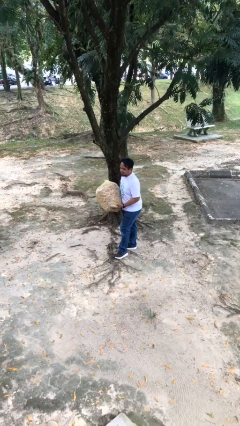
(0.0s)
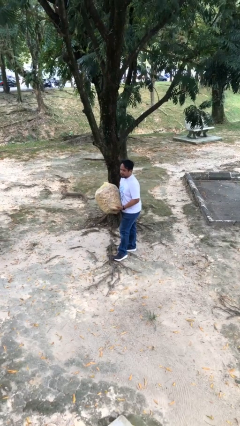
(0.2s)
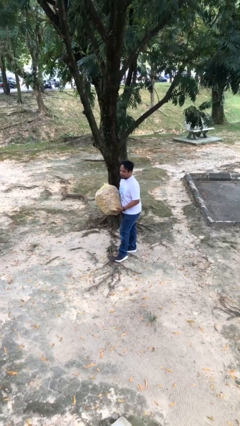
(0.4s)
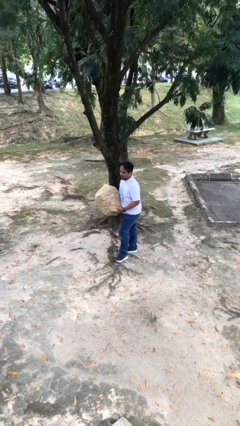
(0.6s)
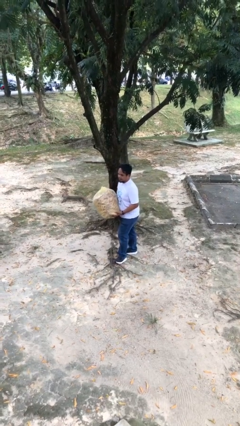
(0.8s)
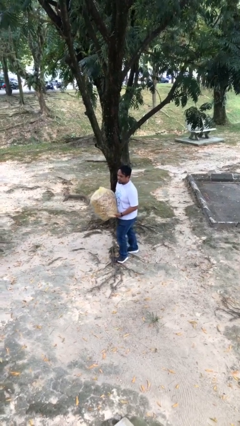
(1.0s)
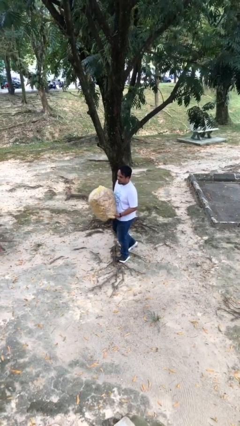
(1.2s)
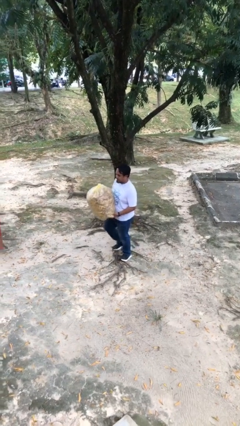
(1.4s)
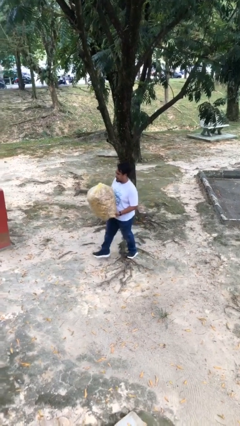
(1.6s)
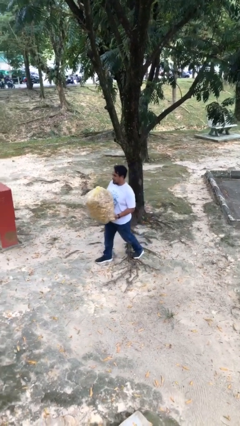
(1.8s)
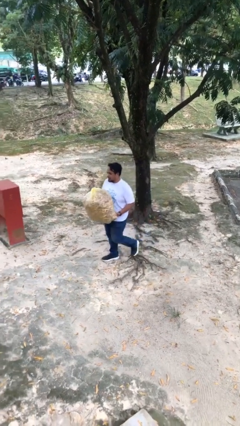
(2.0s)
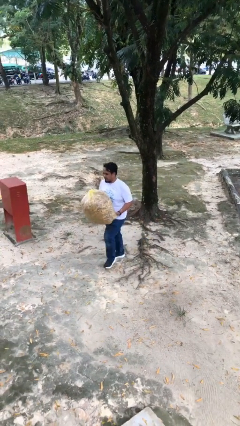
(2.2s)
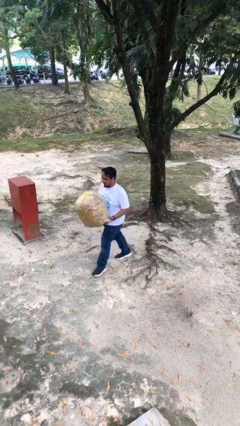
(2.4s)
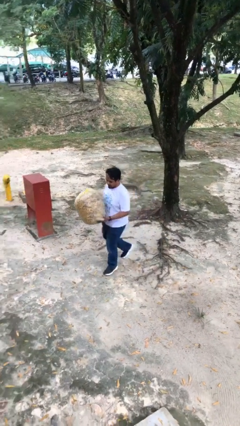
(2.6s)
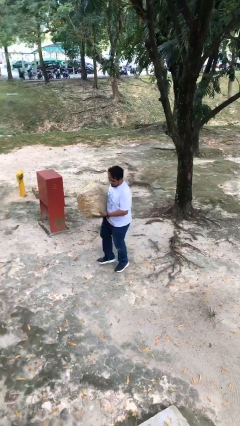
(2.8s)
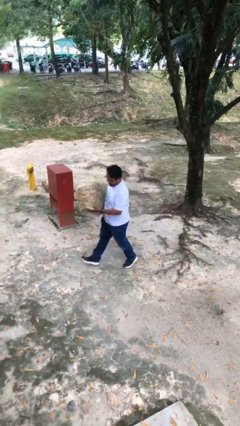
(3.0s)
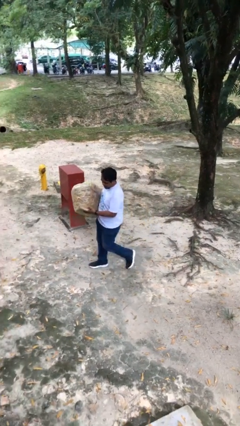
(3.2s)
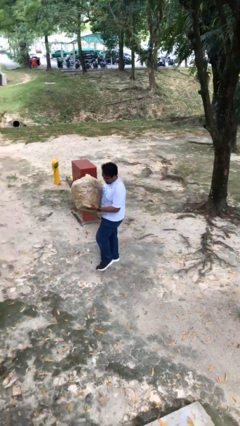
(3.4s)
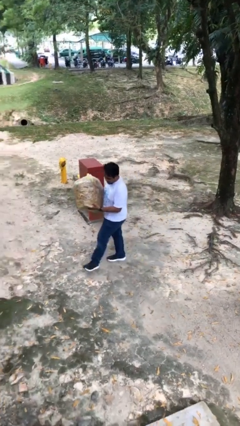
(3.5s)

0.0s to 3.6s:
person carries heavy object

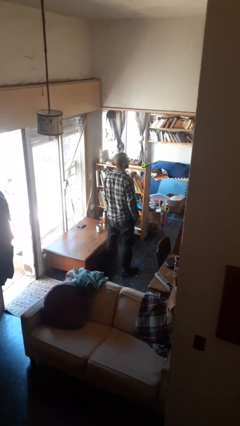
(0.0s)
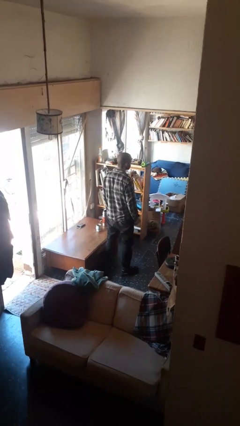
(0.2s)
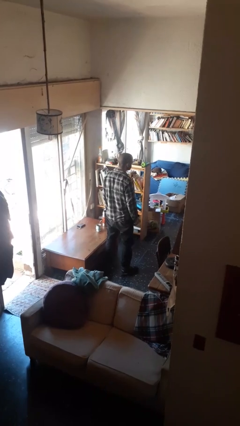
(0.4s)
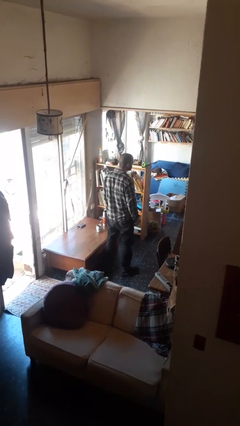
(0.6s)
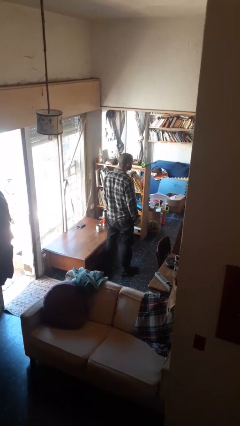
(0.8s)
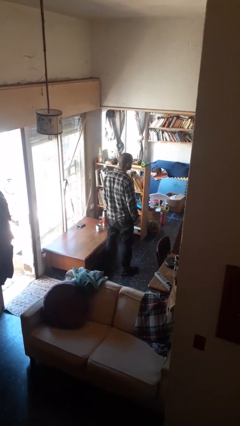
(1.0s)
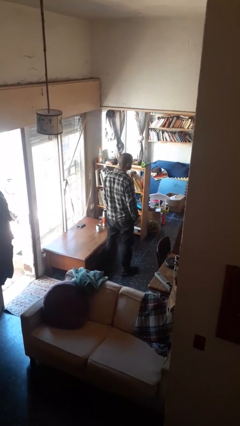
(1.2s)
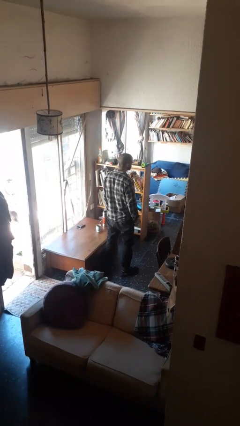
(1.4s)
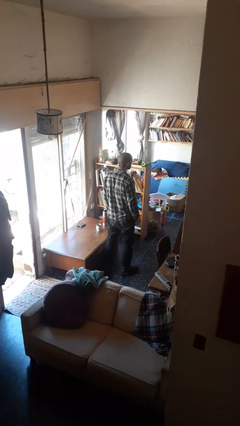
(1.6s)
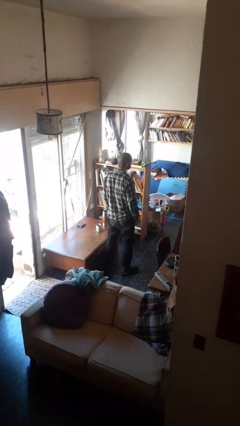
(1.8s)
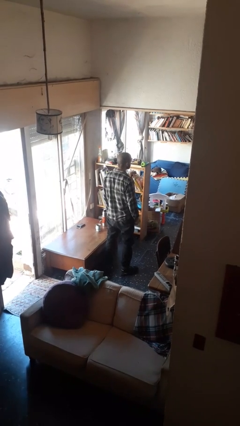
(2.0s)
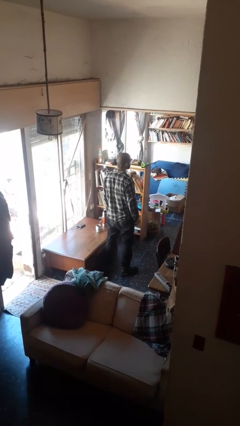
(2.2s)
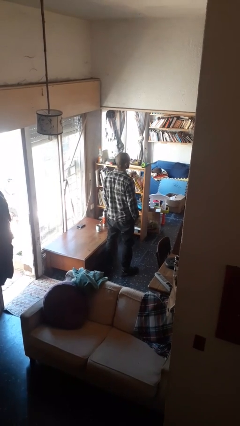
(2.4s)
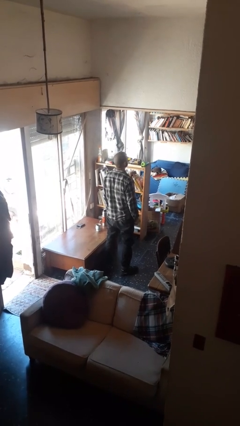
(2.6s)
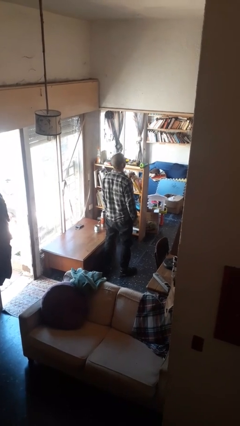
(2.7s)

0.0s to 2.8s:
person sticks out tongue

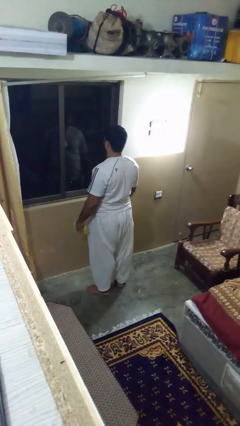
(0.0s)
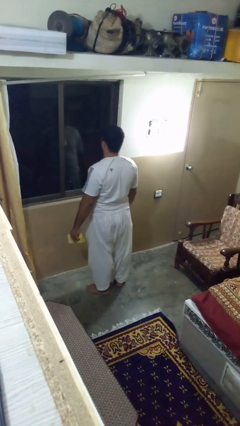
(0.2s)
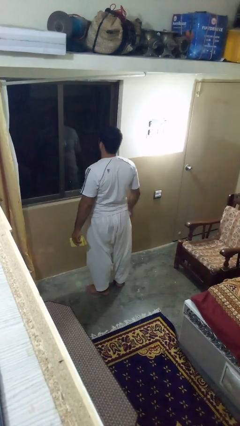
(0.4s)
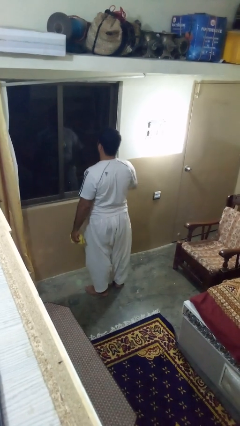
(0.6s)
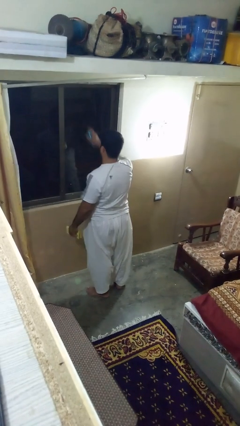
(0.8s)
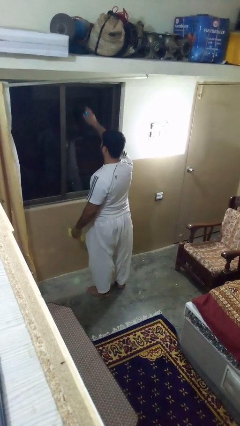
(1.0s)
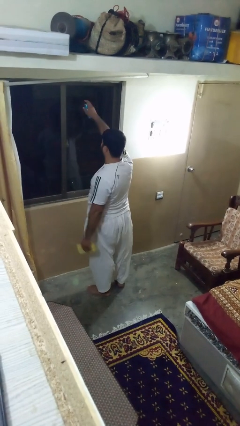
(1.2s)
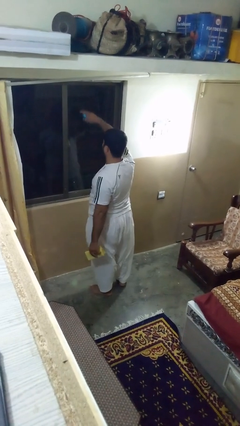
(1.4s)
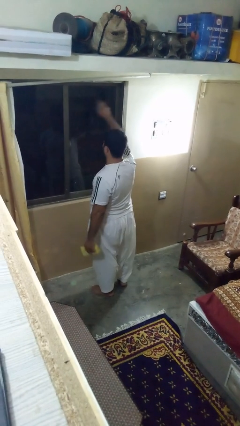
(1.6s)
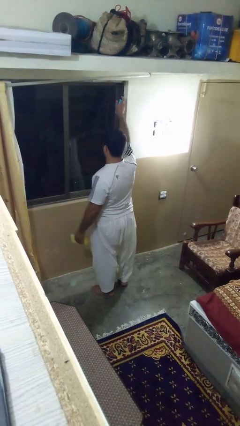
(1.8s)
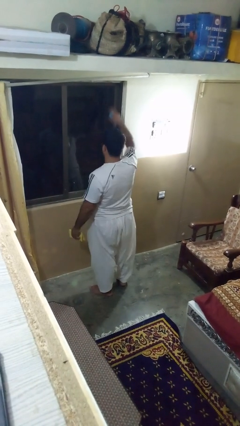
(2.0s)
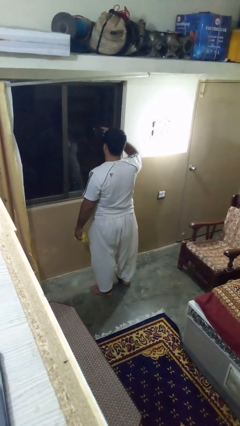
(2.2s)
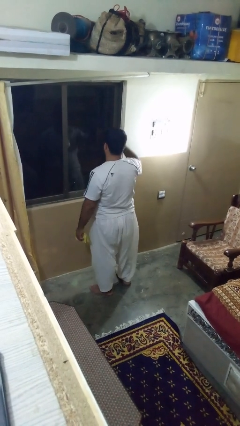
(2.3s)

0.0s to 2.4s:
person sprays from bottle

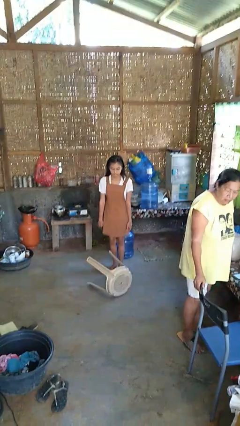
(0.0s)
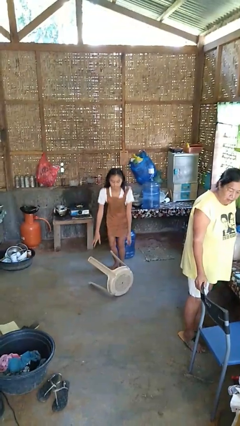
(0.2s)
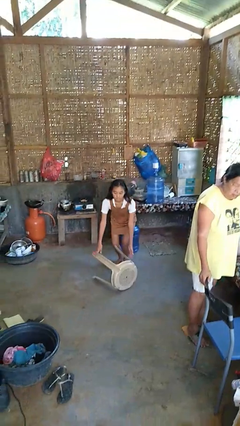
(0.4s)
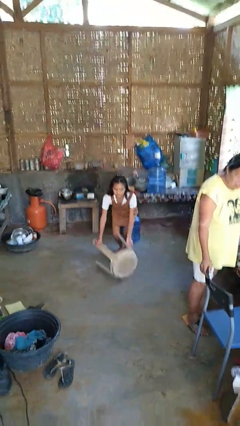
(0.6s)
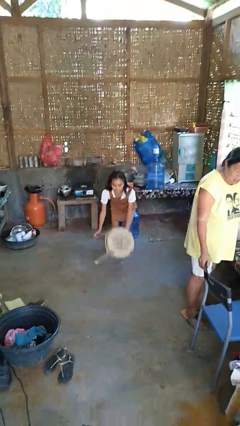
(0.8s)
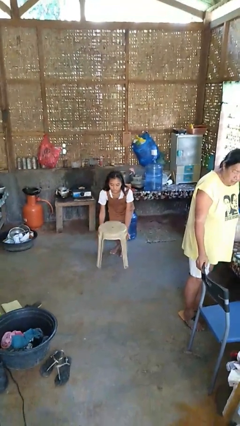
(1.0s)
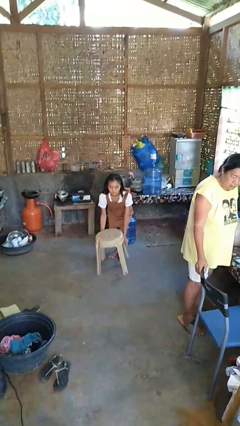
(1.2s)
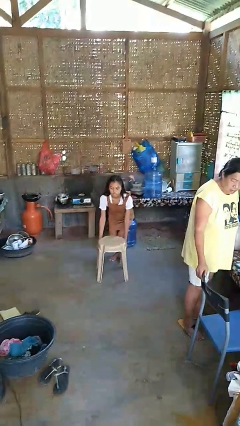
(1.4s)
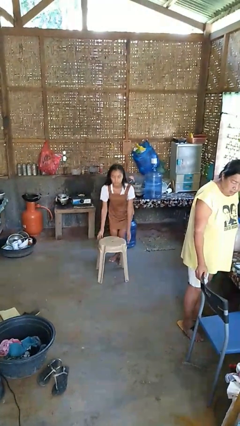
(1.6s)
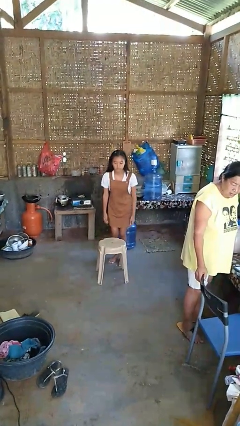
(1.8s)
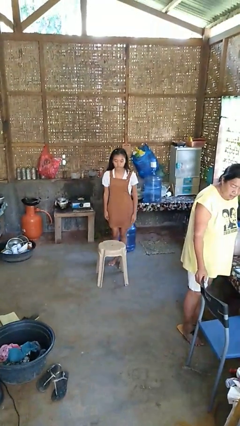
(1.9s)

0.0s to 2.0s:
person sets upright furniture

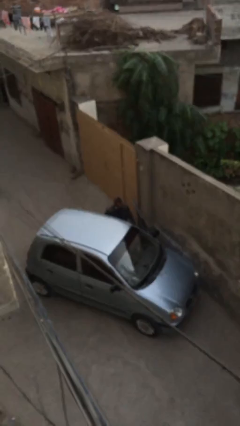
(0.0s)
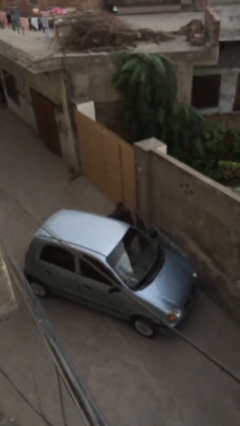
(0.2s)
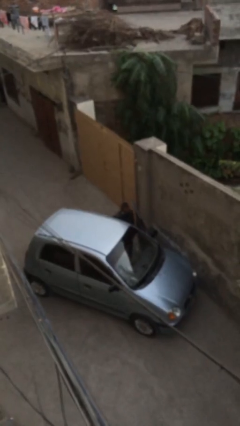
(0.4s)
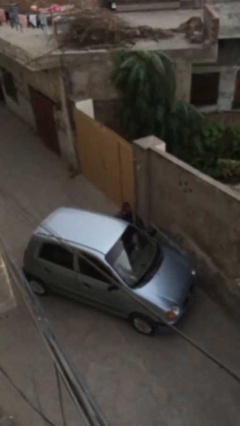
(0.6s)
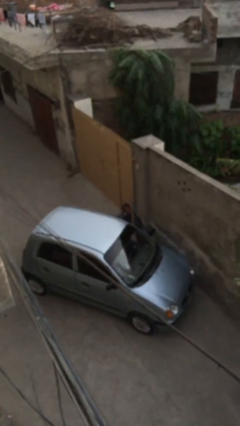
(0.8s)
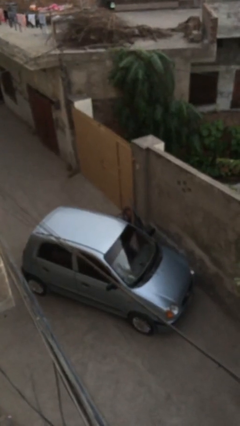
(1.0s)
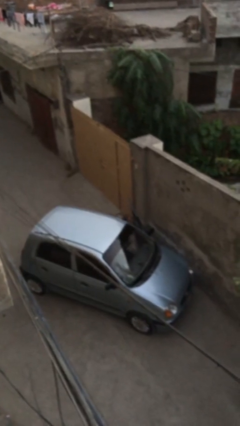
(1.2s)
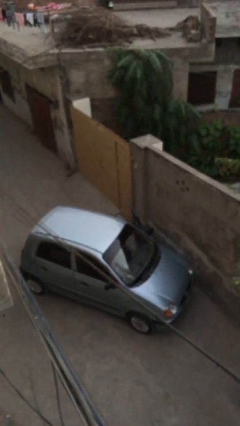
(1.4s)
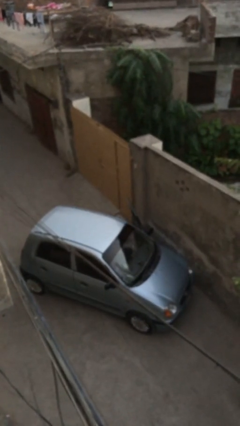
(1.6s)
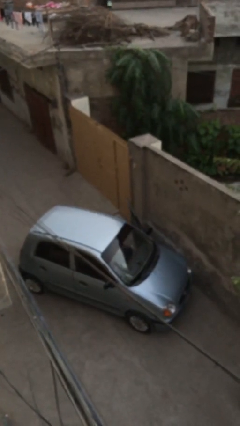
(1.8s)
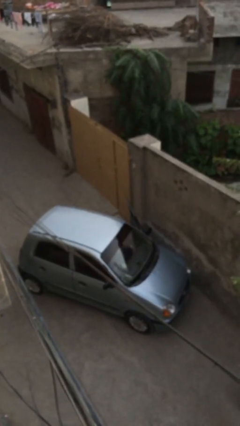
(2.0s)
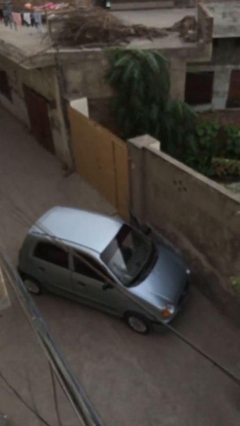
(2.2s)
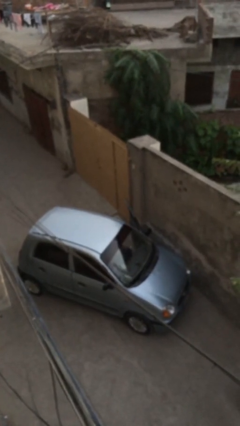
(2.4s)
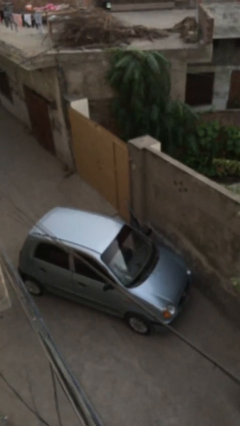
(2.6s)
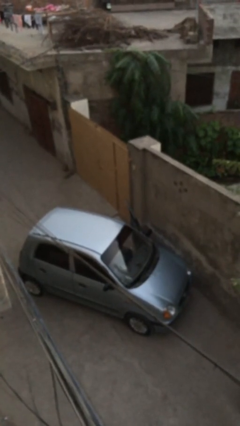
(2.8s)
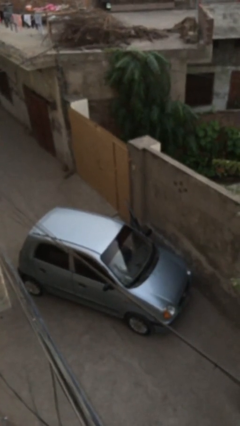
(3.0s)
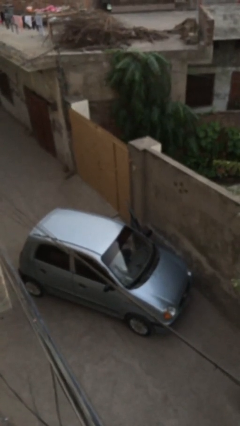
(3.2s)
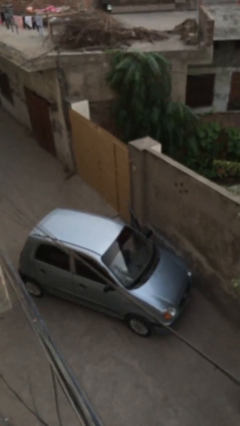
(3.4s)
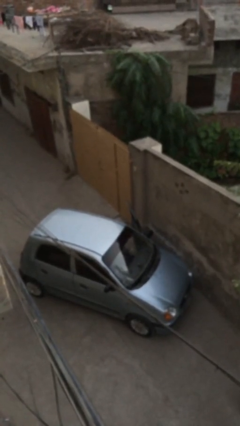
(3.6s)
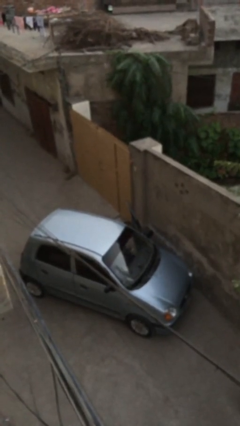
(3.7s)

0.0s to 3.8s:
person enters car

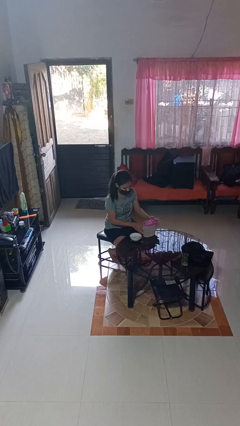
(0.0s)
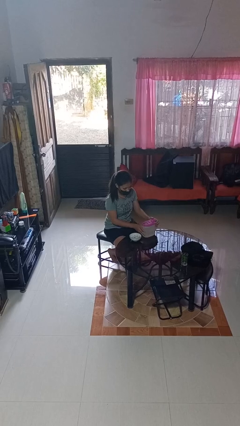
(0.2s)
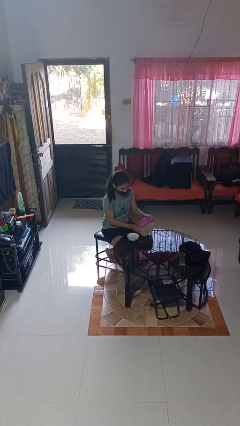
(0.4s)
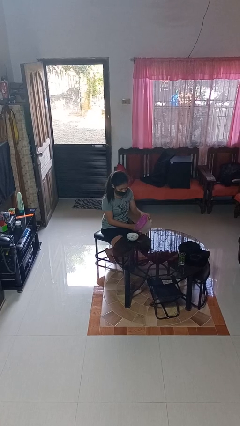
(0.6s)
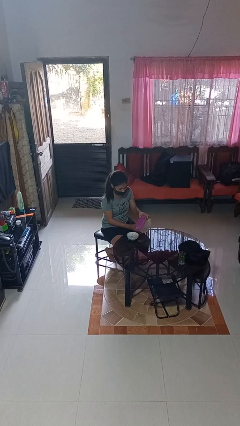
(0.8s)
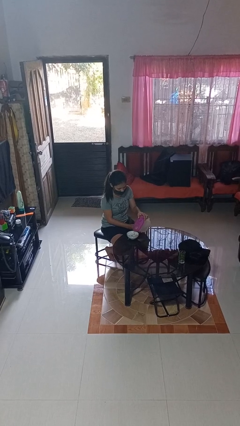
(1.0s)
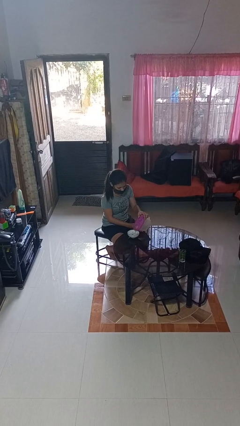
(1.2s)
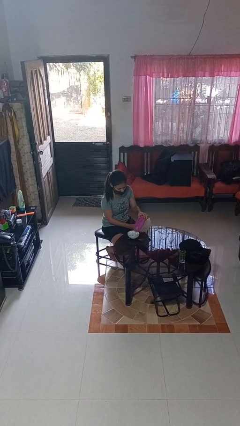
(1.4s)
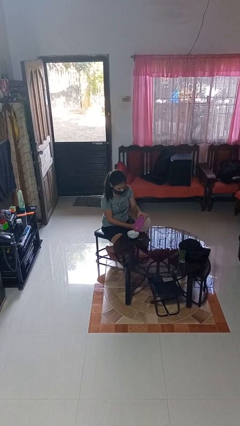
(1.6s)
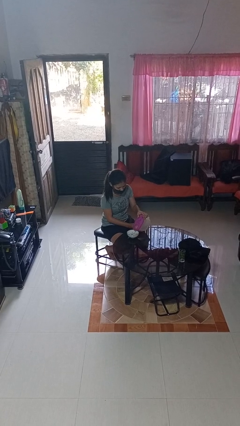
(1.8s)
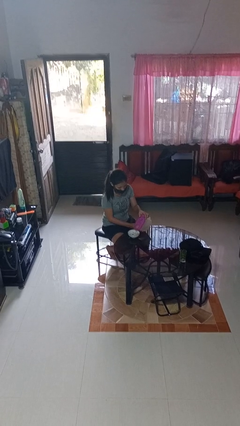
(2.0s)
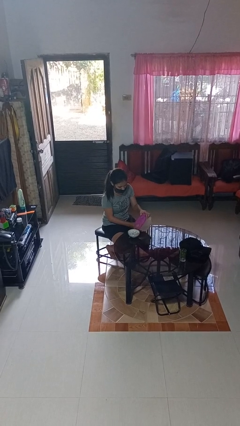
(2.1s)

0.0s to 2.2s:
person pours into bowl

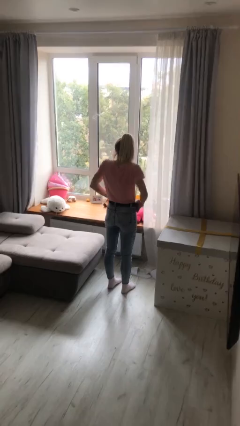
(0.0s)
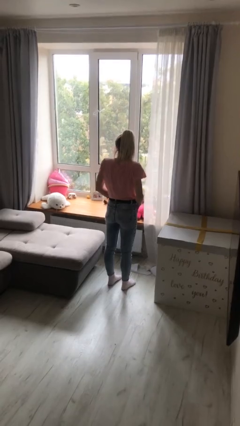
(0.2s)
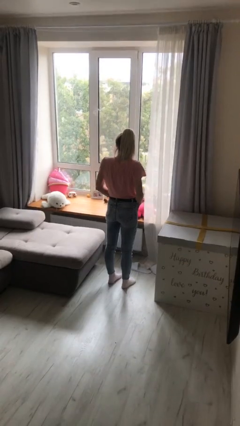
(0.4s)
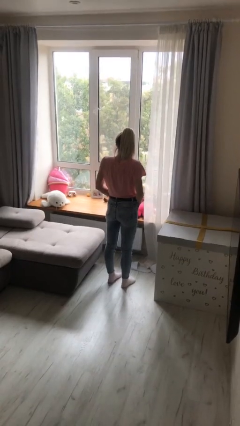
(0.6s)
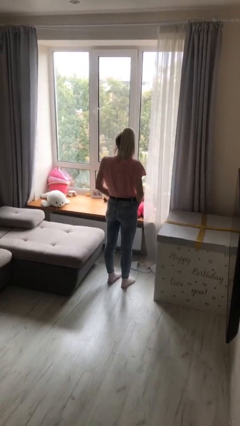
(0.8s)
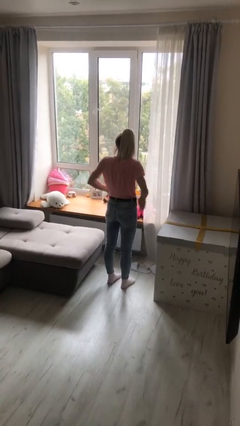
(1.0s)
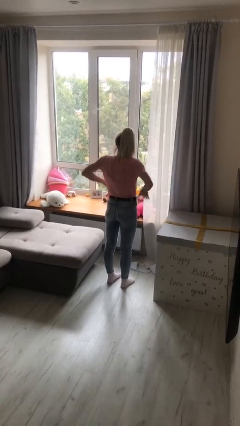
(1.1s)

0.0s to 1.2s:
person puts hands in back pockets
